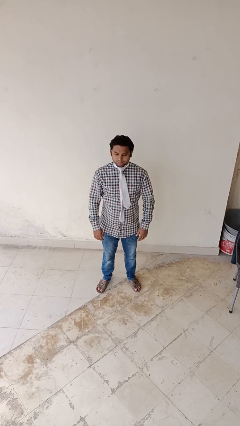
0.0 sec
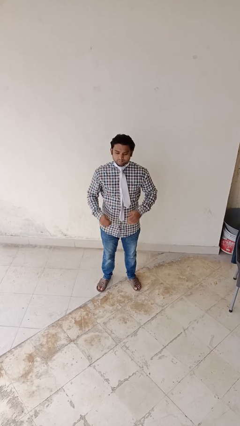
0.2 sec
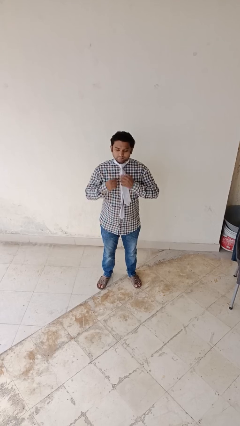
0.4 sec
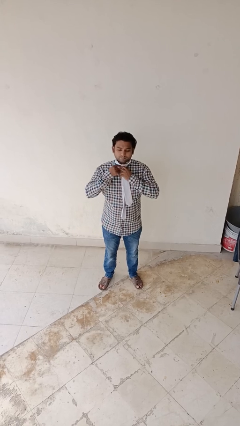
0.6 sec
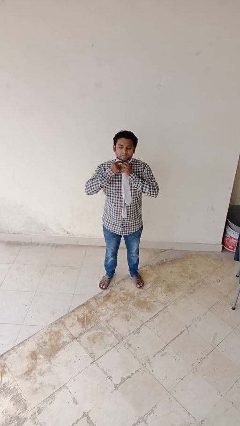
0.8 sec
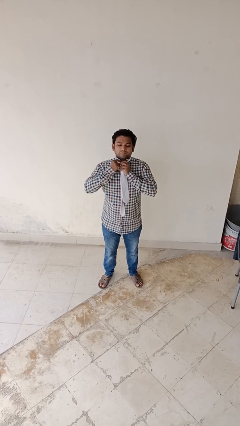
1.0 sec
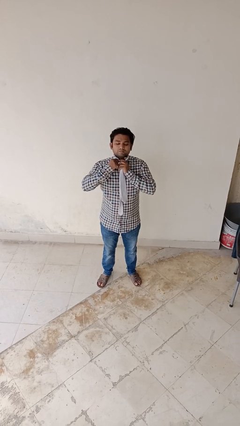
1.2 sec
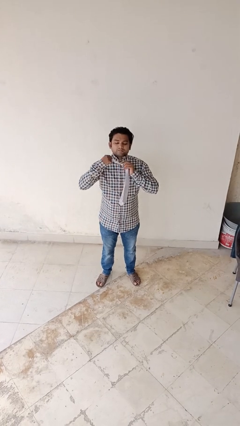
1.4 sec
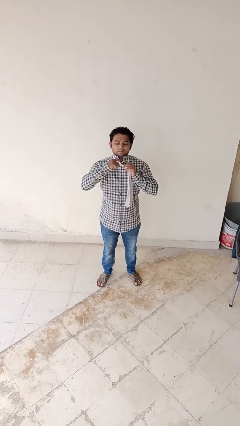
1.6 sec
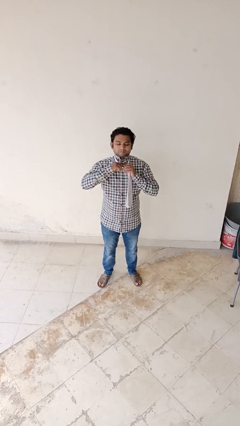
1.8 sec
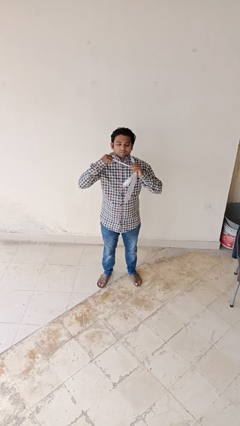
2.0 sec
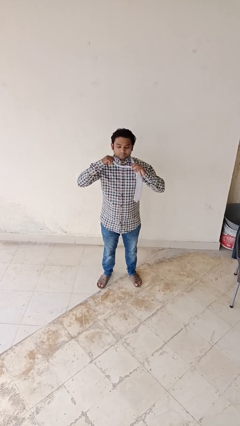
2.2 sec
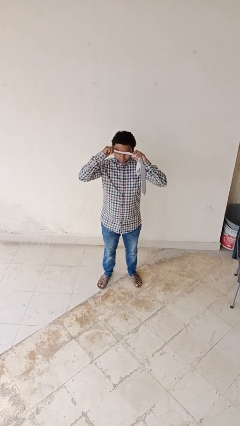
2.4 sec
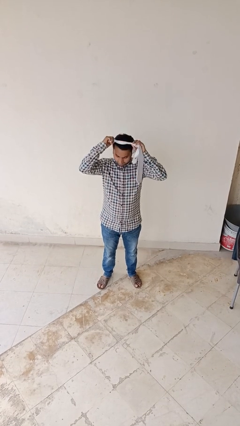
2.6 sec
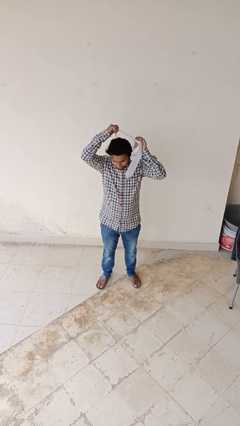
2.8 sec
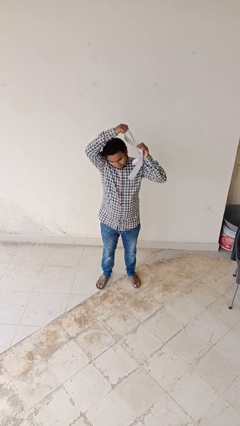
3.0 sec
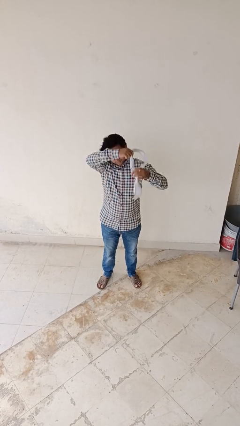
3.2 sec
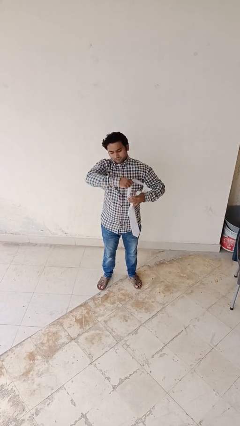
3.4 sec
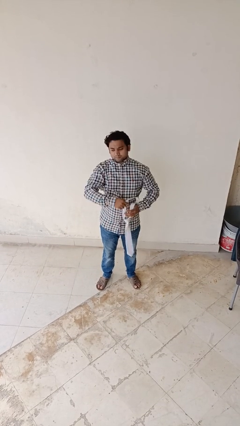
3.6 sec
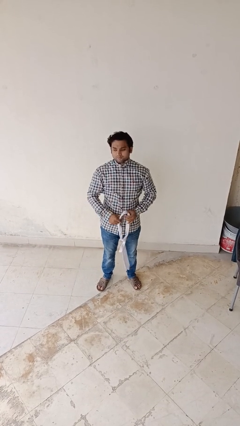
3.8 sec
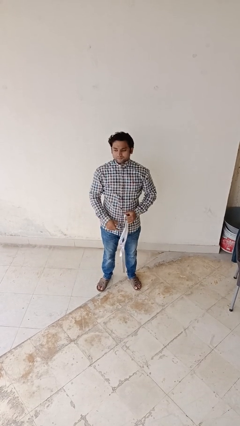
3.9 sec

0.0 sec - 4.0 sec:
person takes off necktie

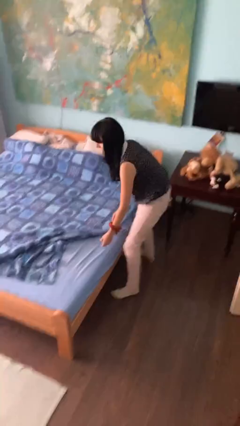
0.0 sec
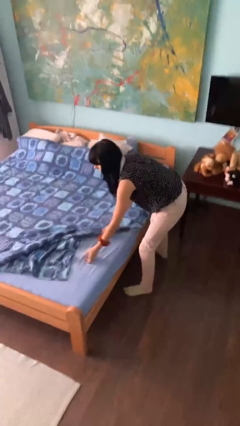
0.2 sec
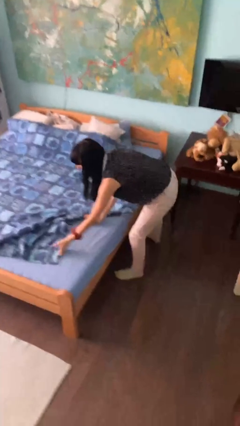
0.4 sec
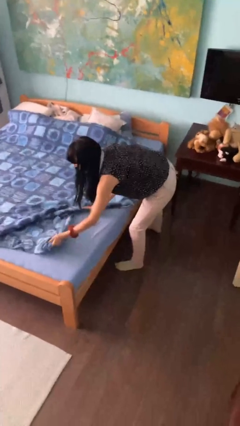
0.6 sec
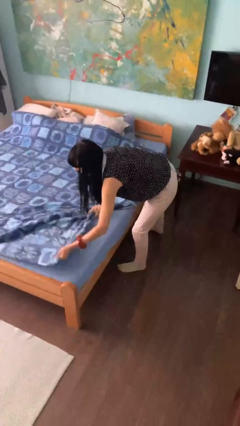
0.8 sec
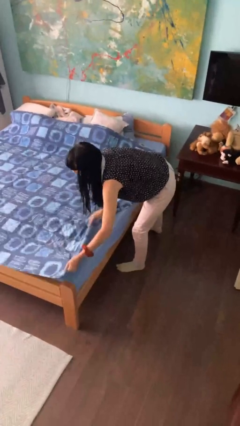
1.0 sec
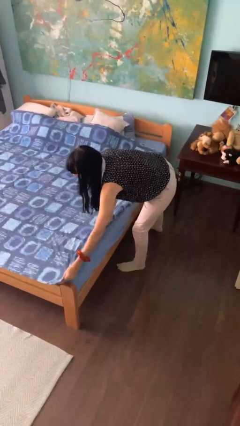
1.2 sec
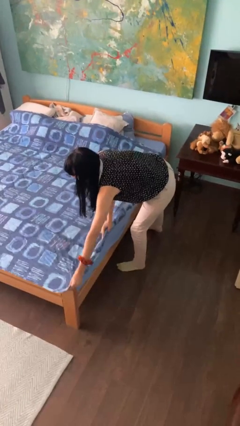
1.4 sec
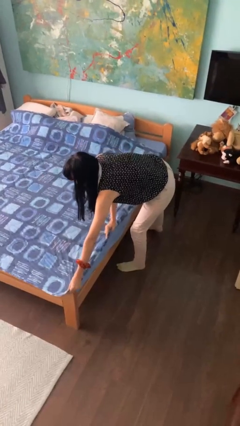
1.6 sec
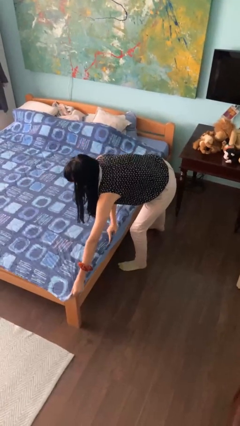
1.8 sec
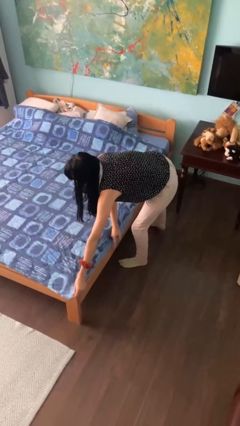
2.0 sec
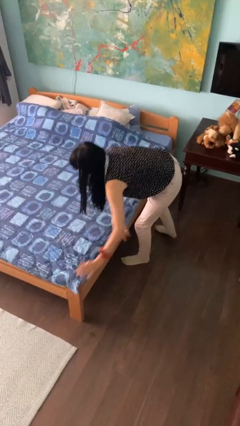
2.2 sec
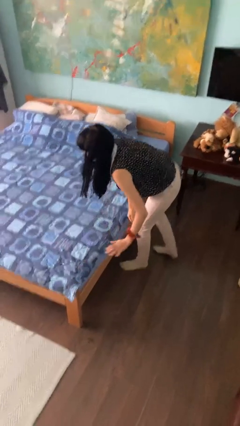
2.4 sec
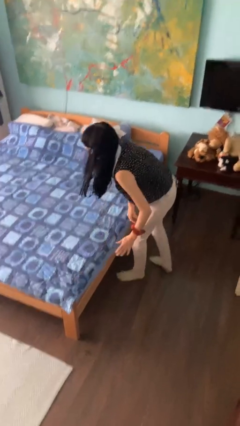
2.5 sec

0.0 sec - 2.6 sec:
person makes bed

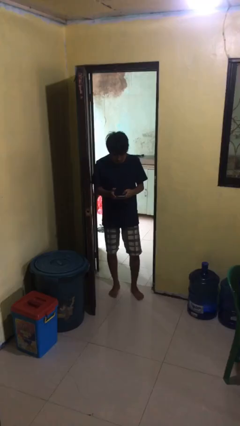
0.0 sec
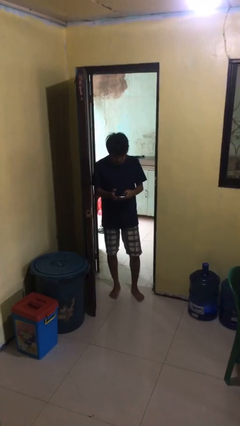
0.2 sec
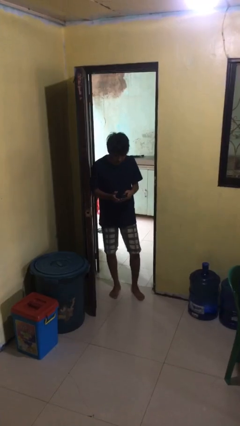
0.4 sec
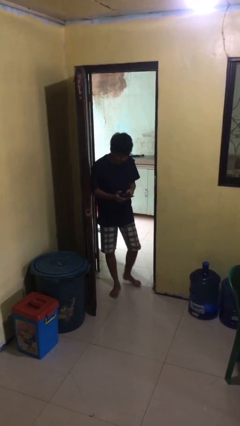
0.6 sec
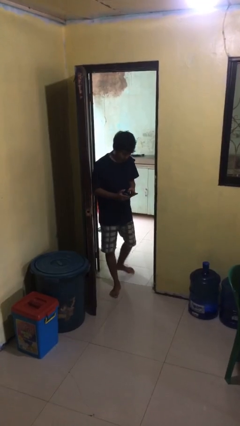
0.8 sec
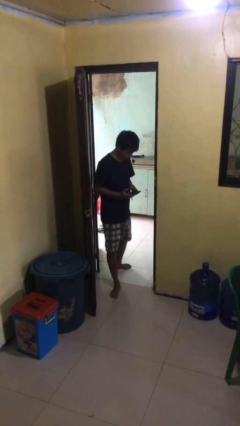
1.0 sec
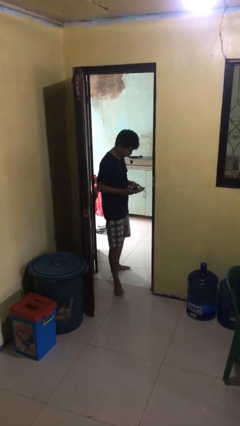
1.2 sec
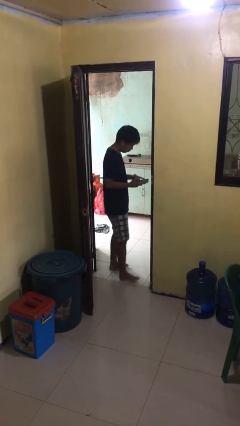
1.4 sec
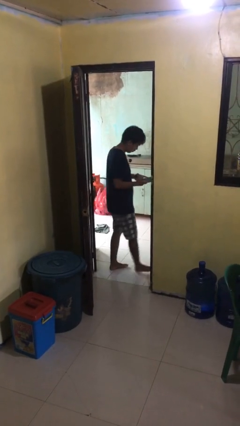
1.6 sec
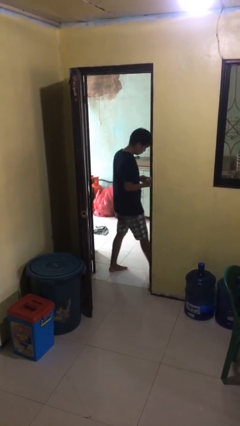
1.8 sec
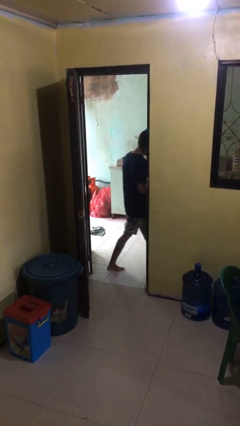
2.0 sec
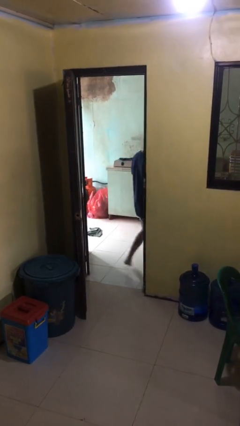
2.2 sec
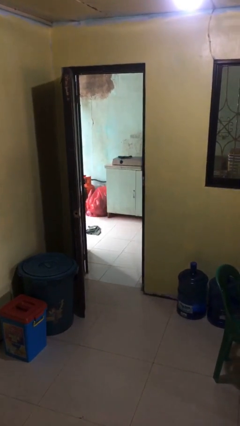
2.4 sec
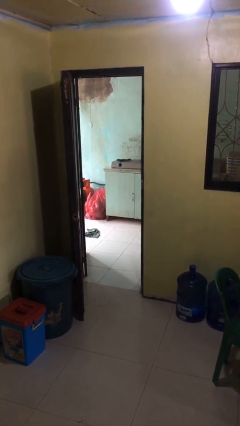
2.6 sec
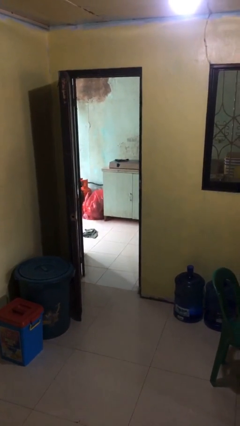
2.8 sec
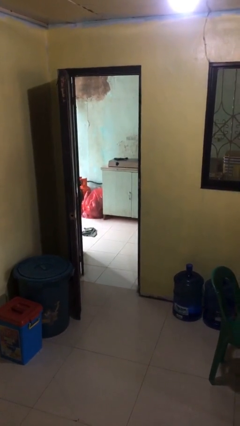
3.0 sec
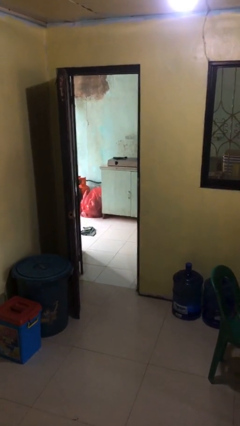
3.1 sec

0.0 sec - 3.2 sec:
person exits scene through structure

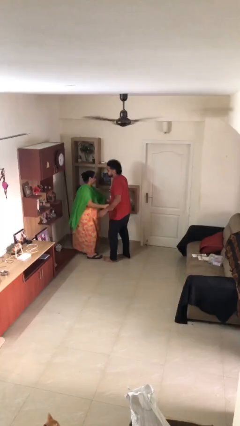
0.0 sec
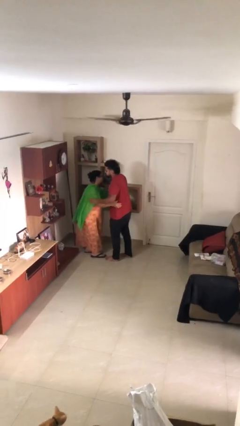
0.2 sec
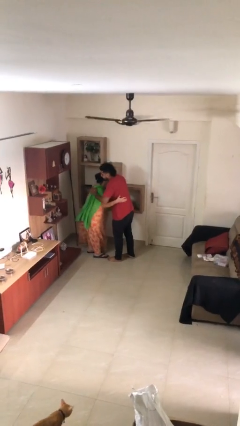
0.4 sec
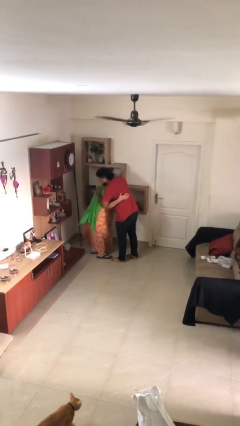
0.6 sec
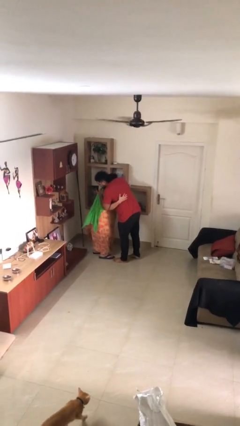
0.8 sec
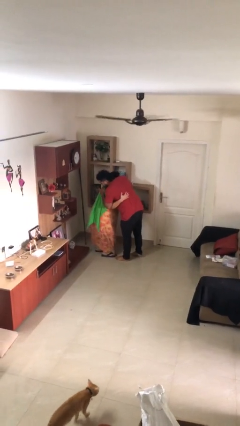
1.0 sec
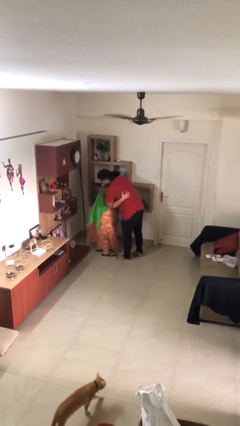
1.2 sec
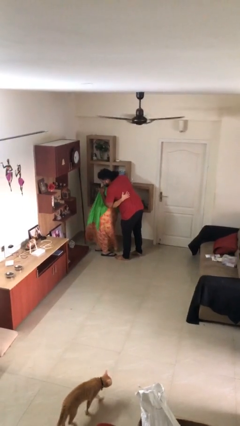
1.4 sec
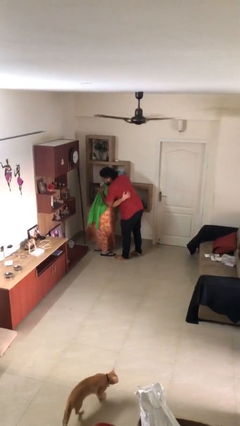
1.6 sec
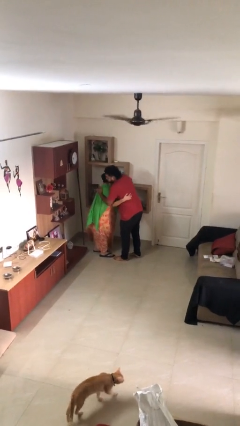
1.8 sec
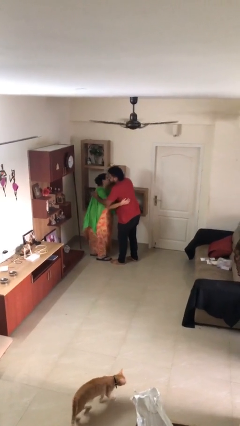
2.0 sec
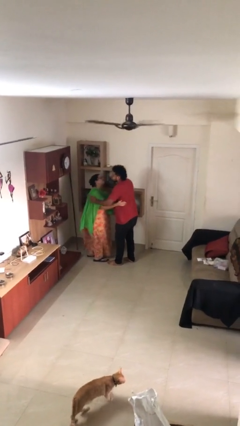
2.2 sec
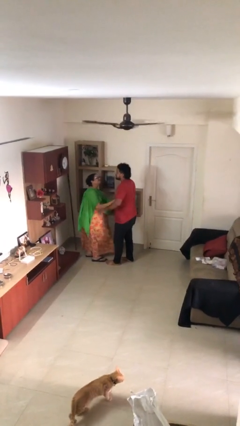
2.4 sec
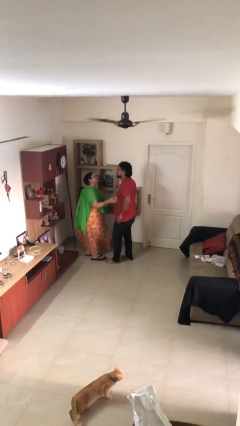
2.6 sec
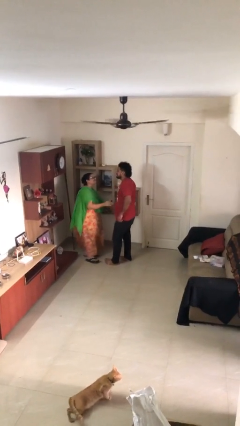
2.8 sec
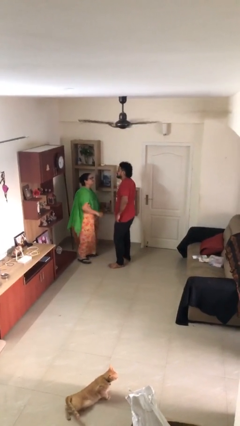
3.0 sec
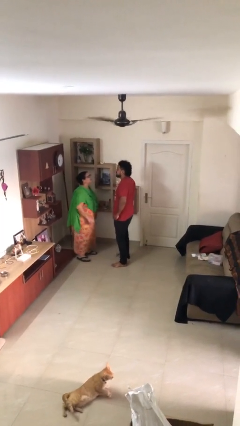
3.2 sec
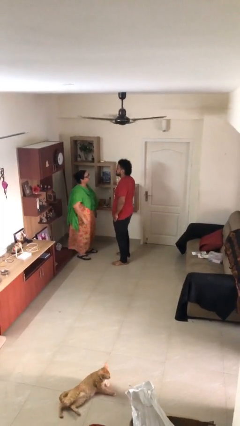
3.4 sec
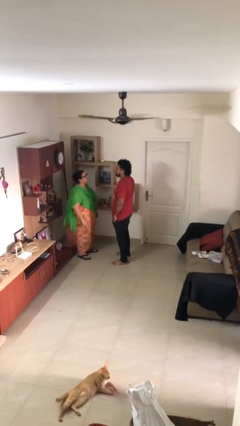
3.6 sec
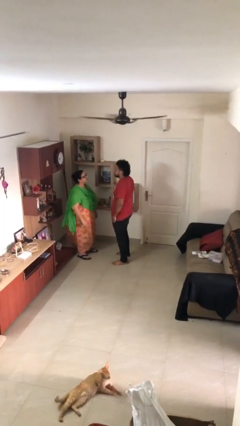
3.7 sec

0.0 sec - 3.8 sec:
person embraces person

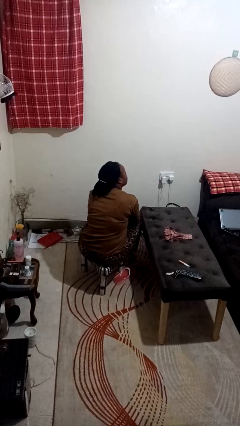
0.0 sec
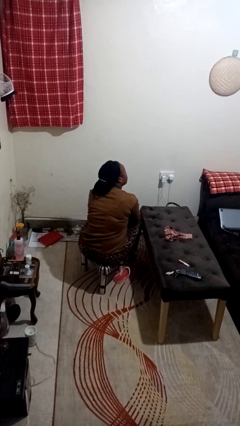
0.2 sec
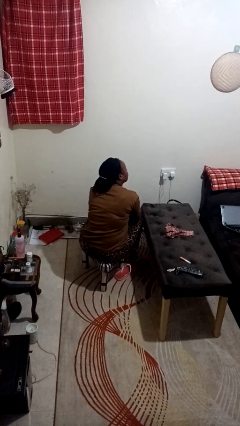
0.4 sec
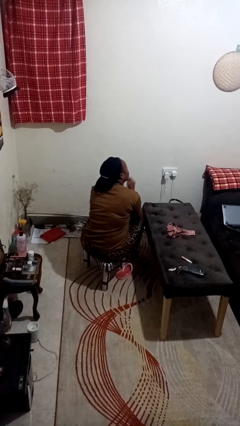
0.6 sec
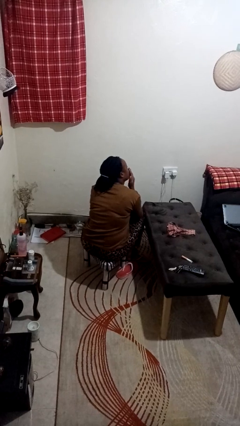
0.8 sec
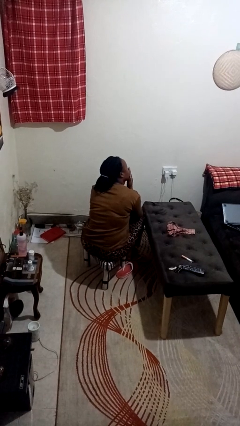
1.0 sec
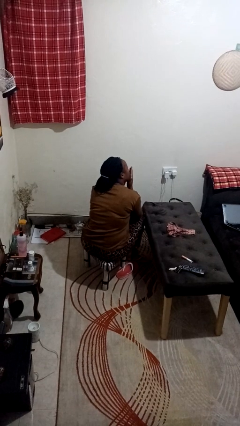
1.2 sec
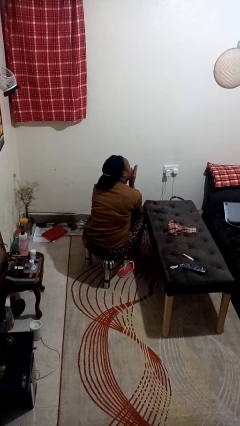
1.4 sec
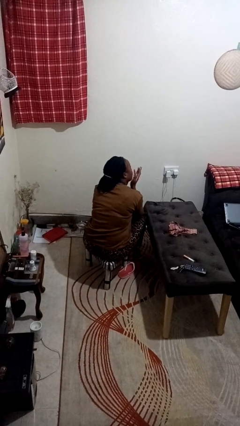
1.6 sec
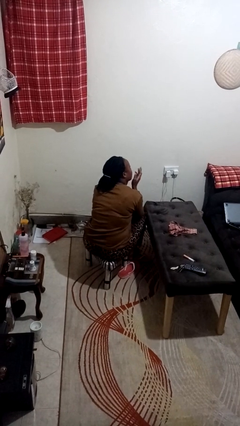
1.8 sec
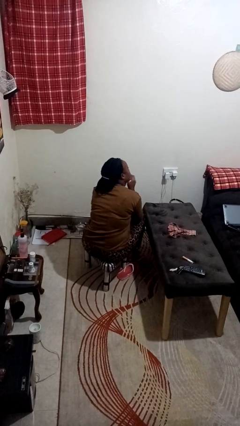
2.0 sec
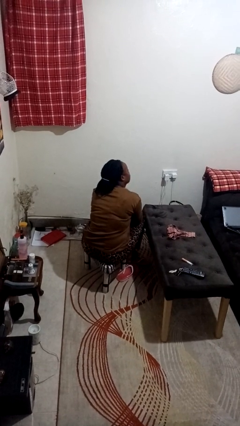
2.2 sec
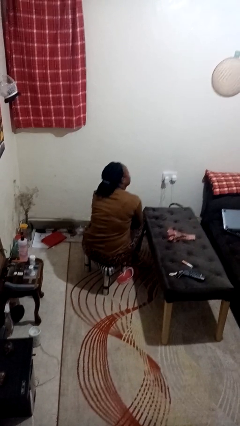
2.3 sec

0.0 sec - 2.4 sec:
person gestures blow kiss

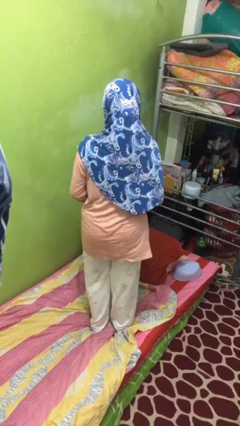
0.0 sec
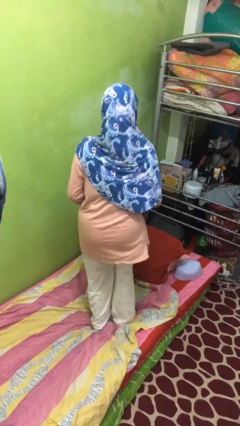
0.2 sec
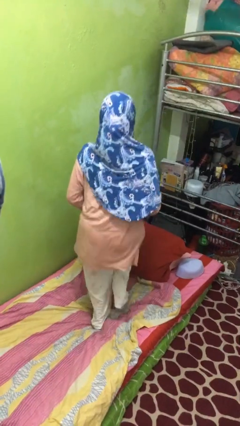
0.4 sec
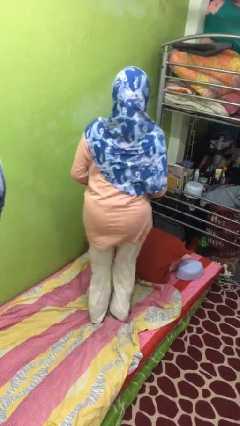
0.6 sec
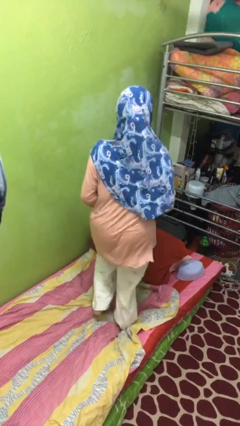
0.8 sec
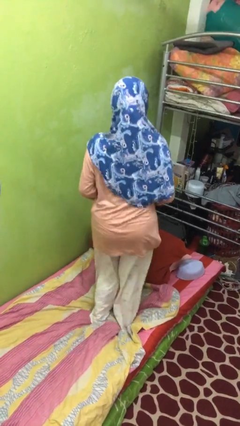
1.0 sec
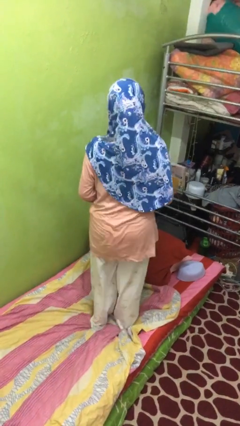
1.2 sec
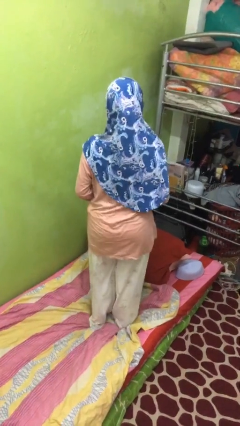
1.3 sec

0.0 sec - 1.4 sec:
person jumps on bed

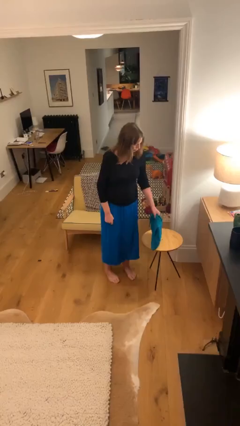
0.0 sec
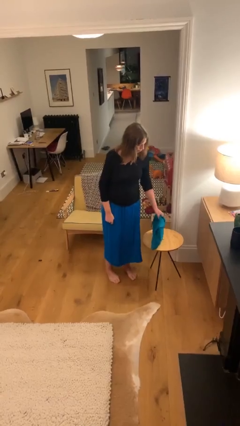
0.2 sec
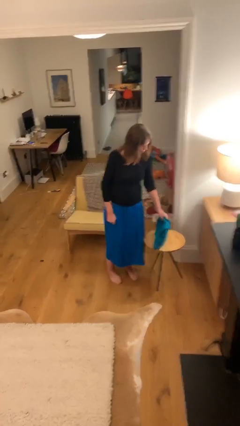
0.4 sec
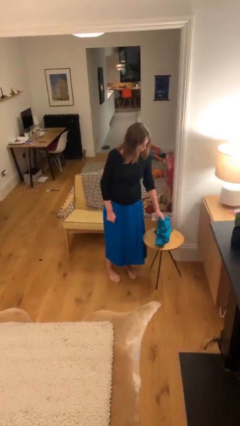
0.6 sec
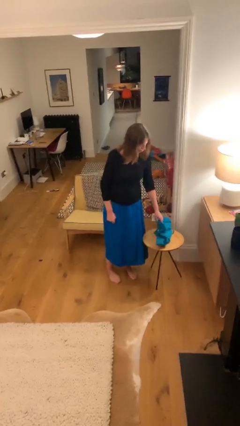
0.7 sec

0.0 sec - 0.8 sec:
person puts down object on table
